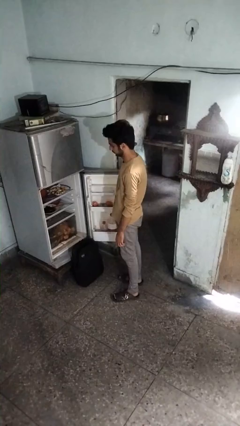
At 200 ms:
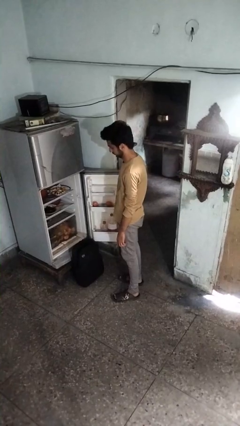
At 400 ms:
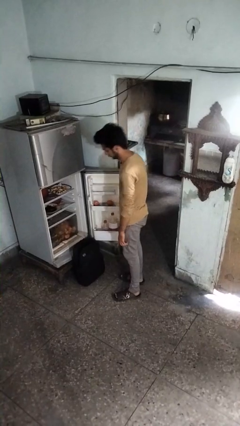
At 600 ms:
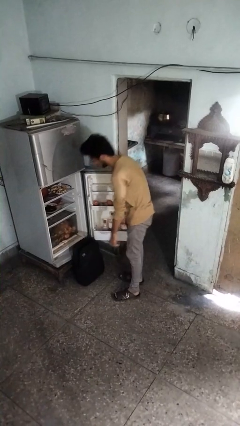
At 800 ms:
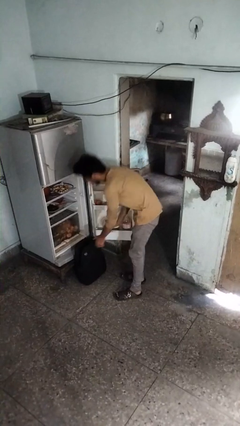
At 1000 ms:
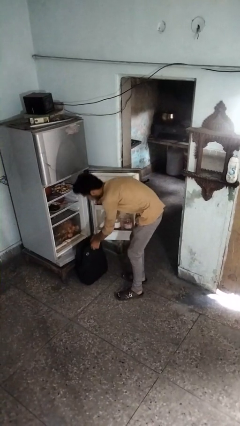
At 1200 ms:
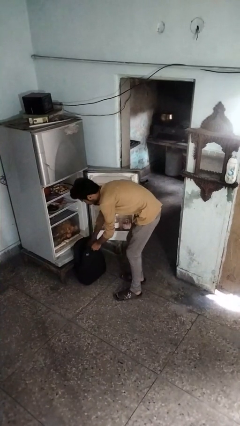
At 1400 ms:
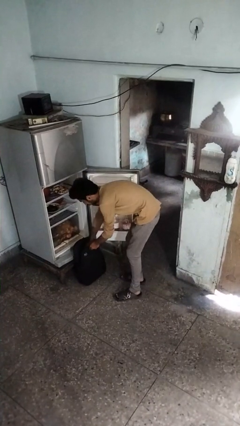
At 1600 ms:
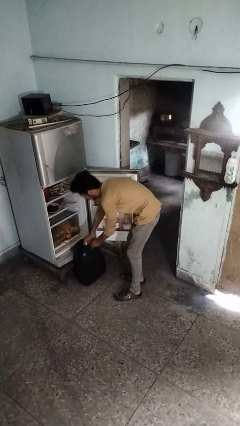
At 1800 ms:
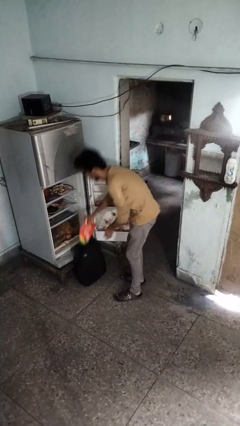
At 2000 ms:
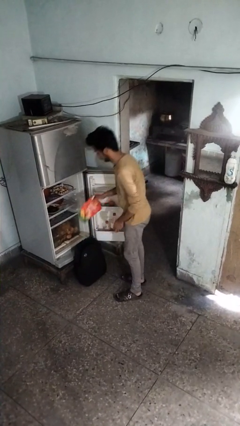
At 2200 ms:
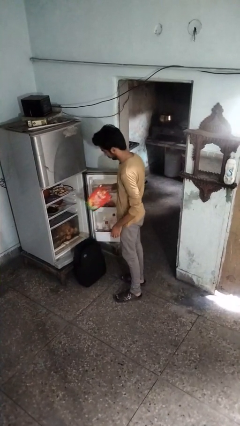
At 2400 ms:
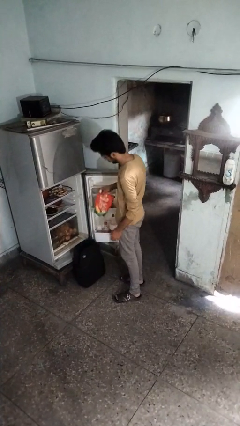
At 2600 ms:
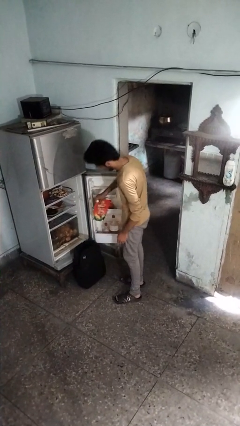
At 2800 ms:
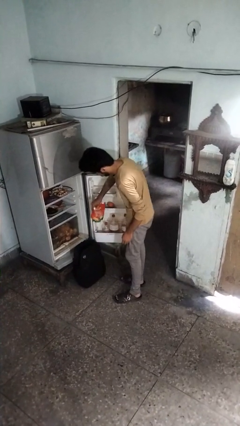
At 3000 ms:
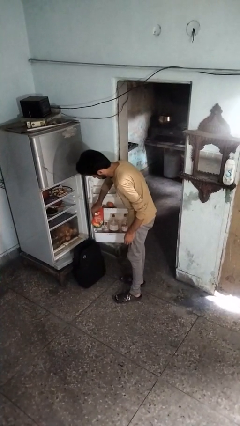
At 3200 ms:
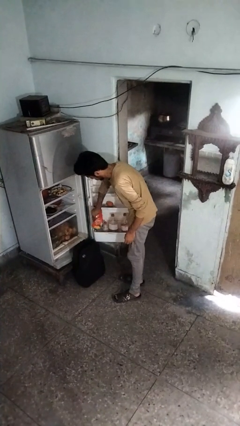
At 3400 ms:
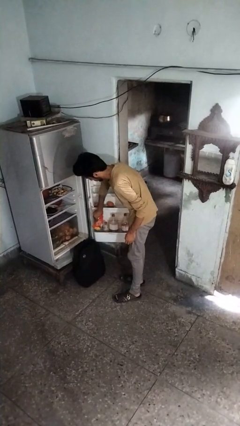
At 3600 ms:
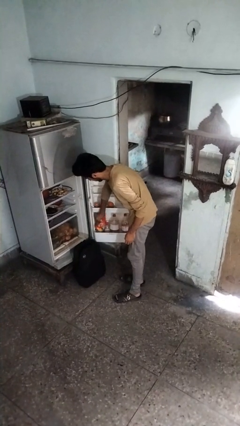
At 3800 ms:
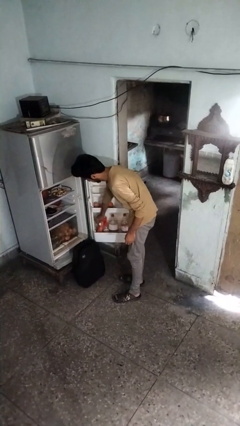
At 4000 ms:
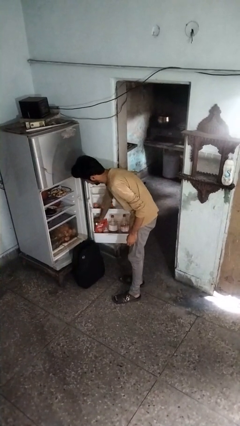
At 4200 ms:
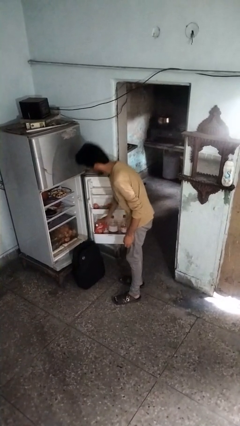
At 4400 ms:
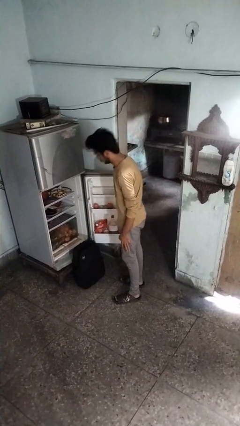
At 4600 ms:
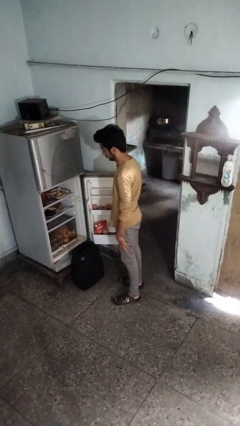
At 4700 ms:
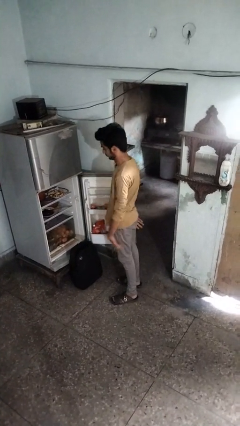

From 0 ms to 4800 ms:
person loads groceries into refrigerator

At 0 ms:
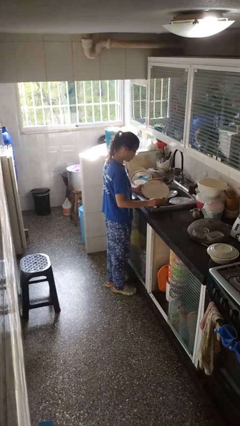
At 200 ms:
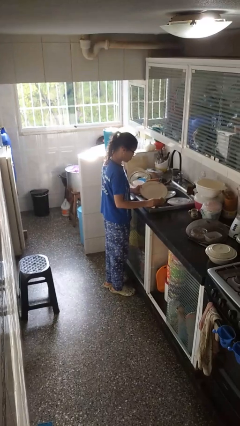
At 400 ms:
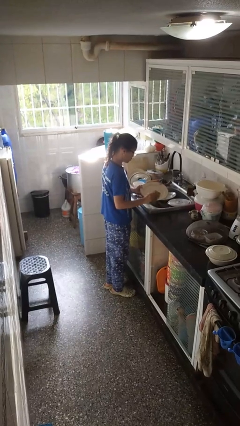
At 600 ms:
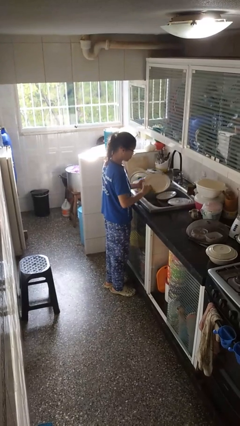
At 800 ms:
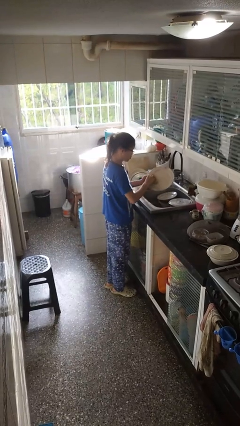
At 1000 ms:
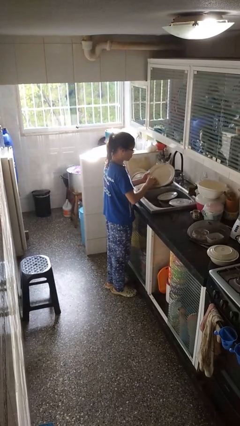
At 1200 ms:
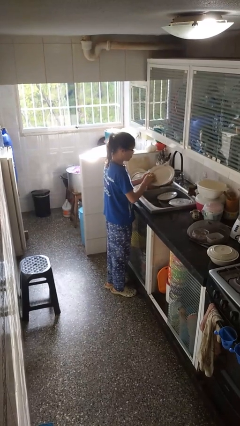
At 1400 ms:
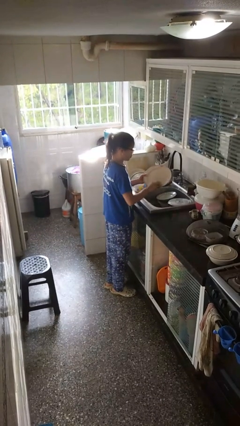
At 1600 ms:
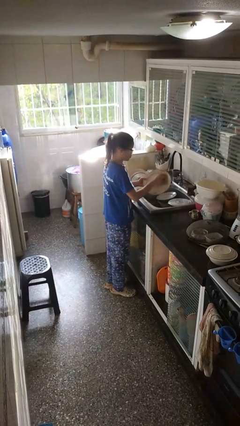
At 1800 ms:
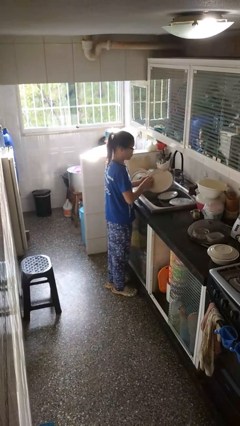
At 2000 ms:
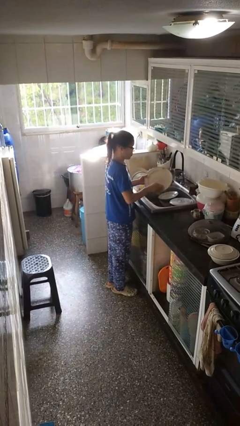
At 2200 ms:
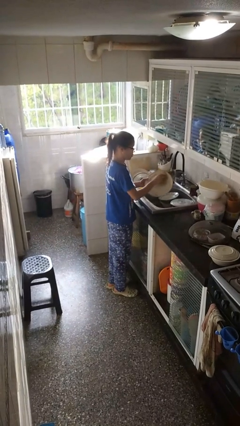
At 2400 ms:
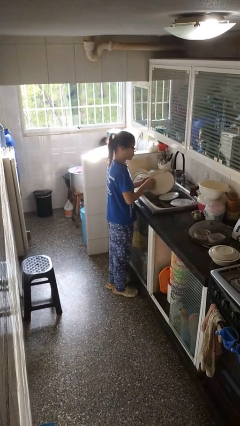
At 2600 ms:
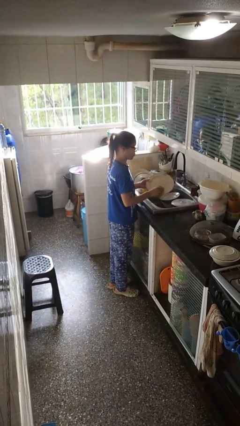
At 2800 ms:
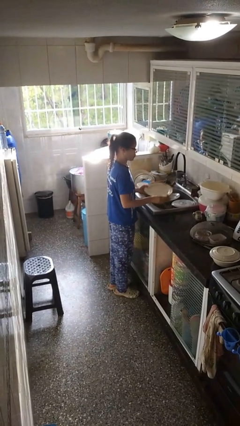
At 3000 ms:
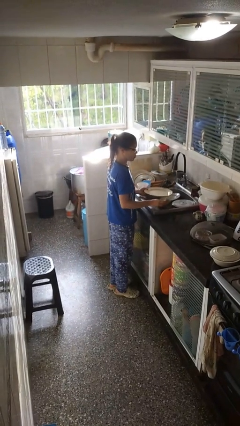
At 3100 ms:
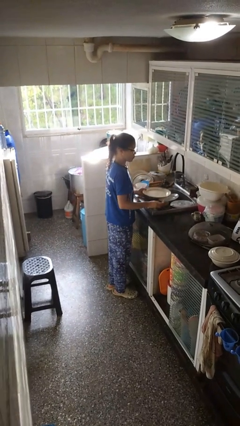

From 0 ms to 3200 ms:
person washes dish

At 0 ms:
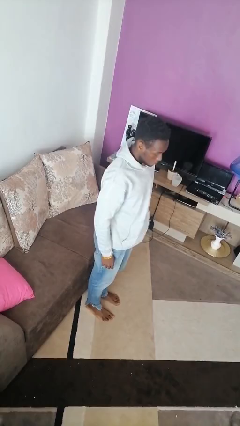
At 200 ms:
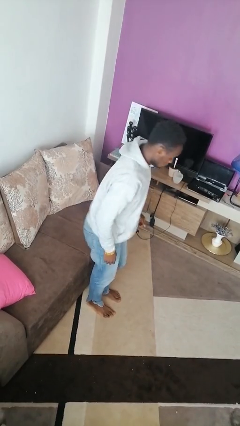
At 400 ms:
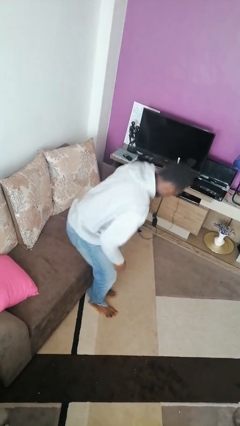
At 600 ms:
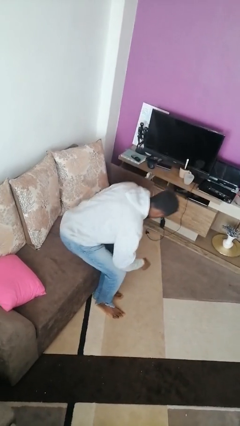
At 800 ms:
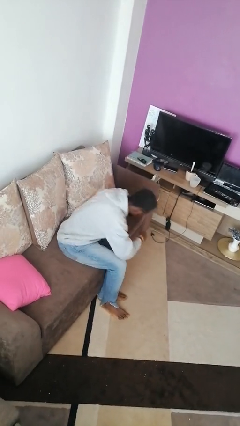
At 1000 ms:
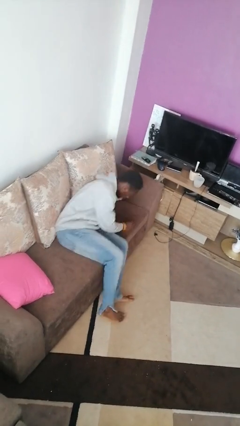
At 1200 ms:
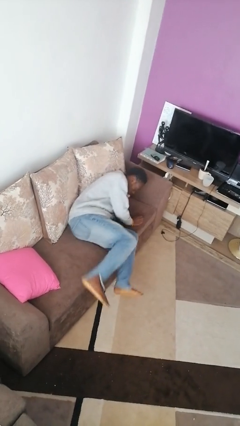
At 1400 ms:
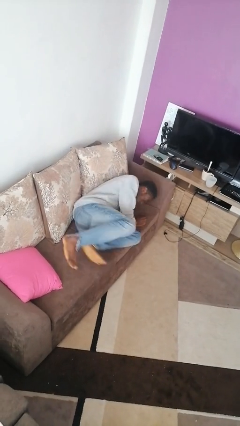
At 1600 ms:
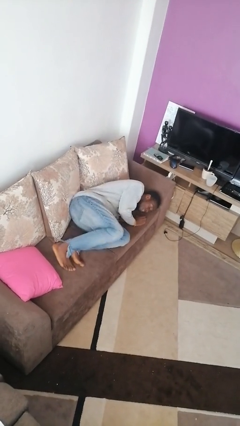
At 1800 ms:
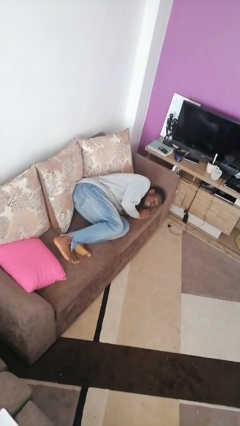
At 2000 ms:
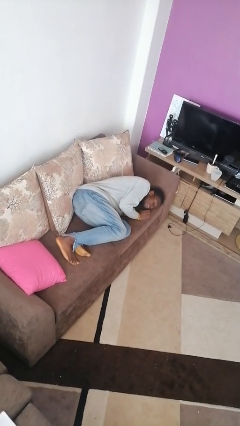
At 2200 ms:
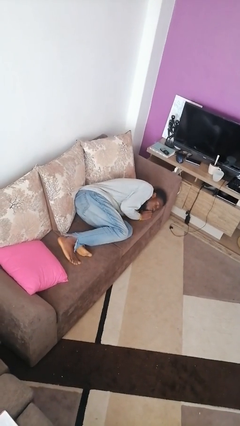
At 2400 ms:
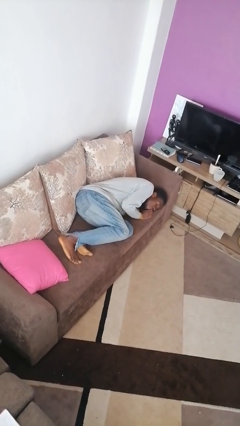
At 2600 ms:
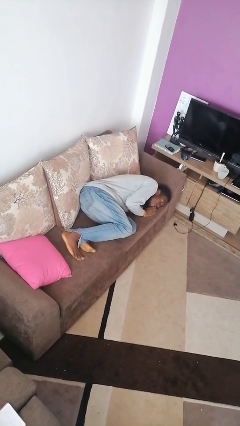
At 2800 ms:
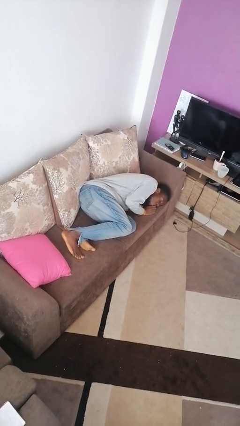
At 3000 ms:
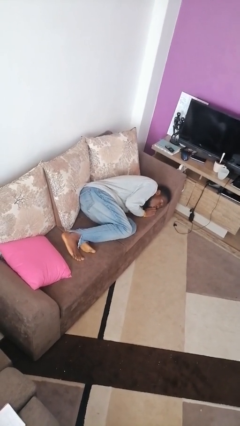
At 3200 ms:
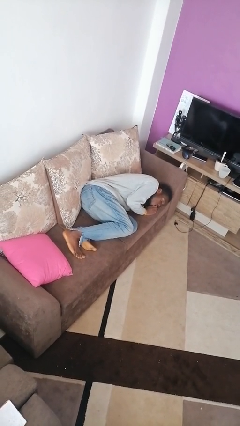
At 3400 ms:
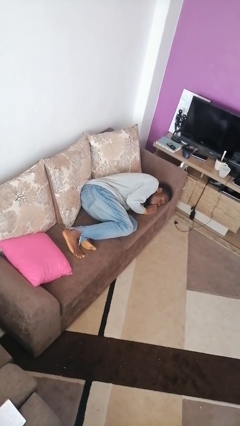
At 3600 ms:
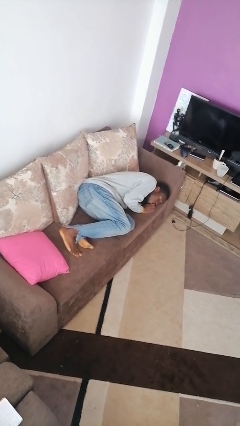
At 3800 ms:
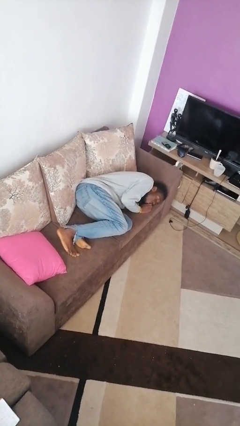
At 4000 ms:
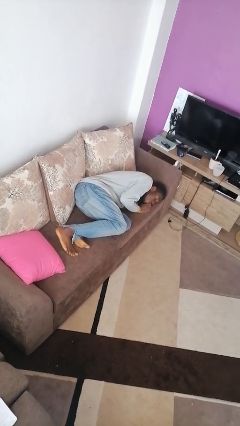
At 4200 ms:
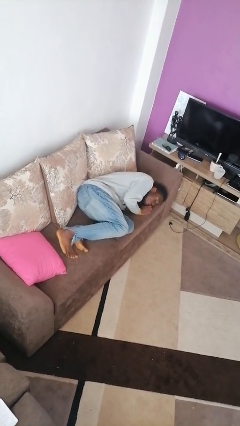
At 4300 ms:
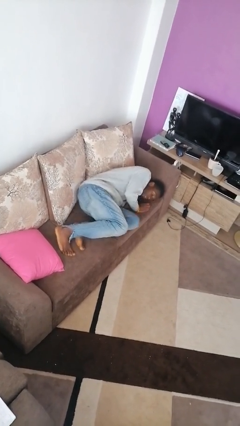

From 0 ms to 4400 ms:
person lies down on couch

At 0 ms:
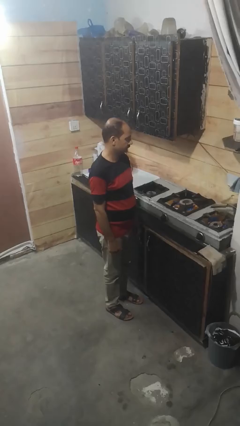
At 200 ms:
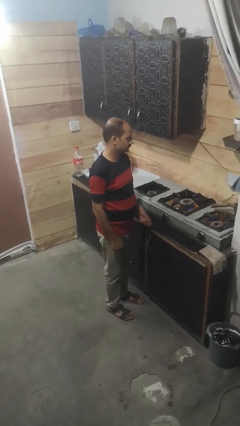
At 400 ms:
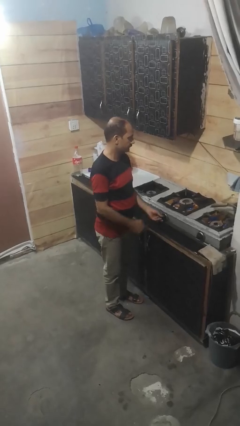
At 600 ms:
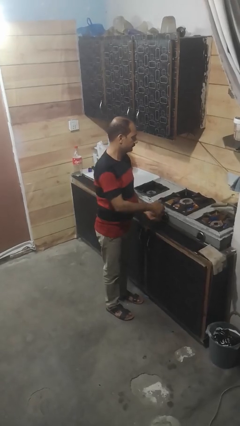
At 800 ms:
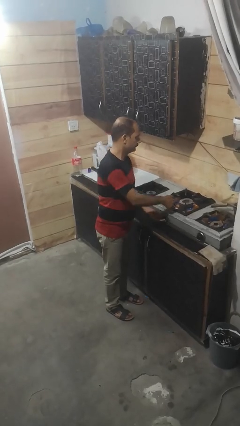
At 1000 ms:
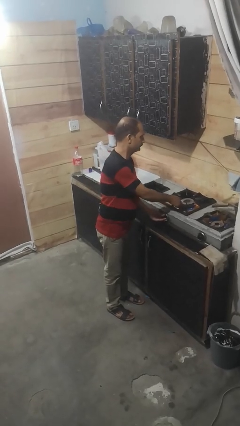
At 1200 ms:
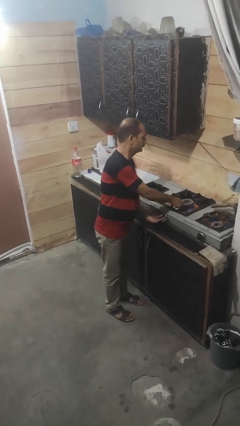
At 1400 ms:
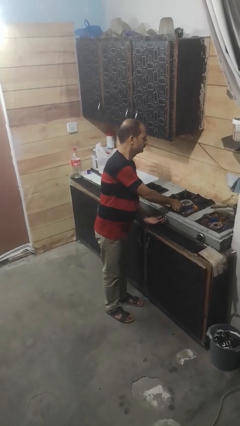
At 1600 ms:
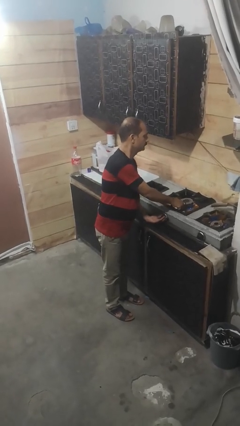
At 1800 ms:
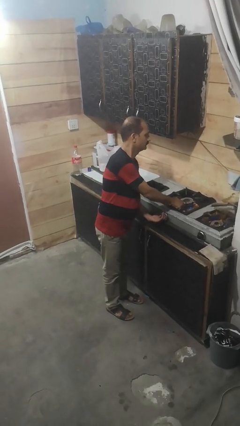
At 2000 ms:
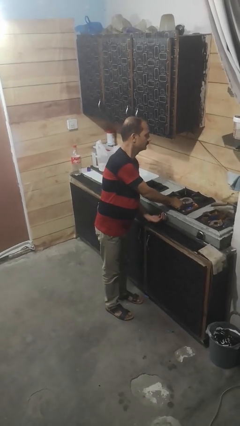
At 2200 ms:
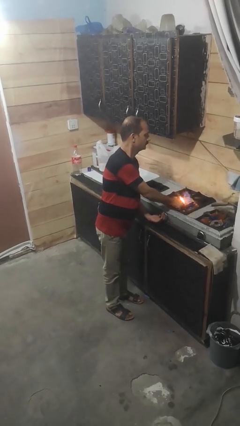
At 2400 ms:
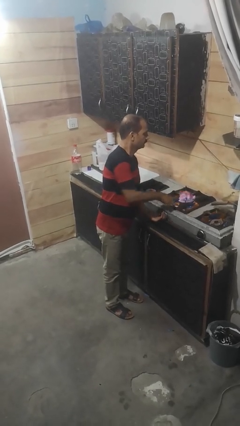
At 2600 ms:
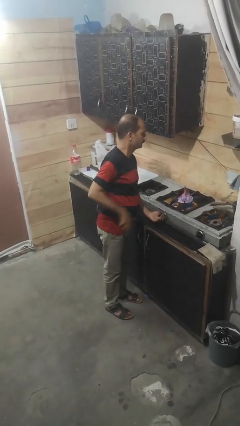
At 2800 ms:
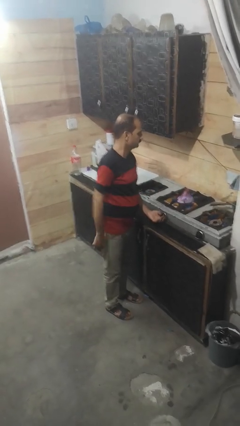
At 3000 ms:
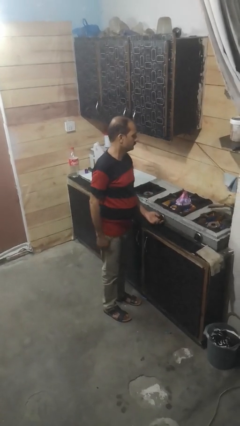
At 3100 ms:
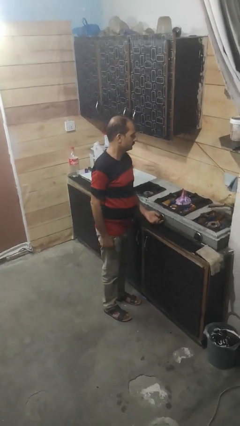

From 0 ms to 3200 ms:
person turns on stovetop

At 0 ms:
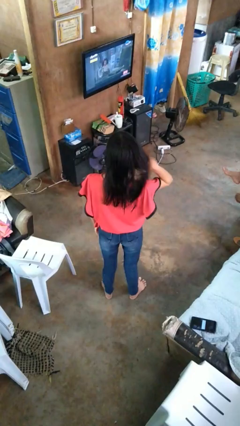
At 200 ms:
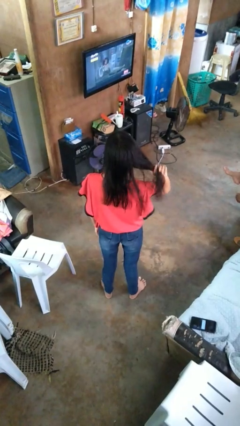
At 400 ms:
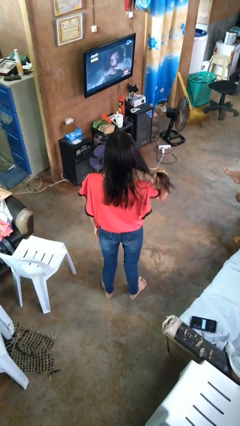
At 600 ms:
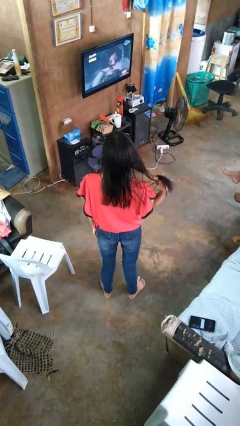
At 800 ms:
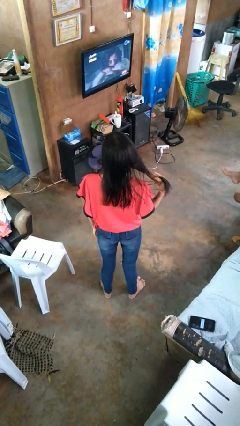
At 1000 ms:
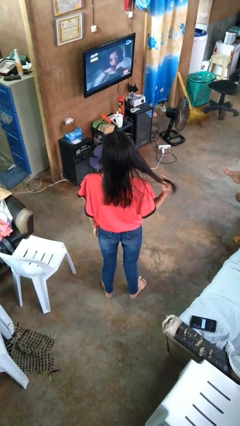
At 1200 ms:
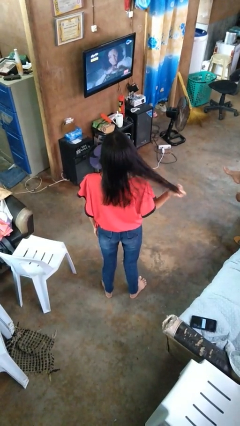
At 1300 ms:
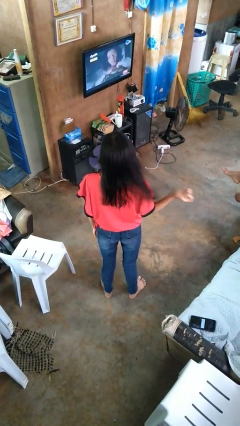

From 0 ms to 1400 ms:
person strokes hair

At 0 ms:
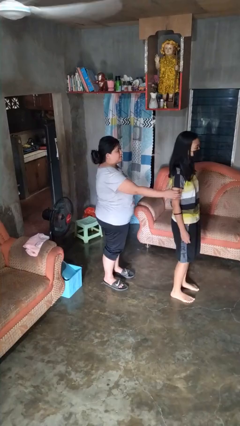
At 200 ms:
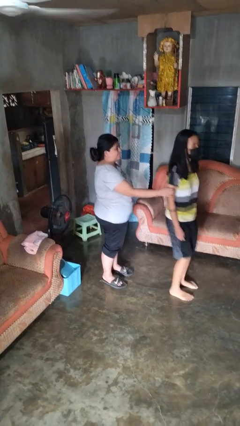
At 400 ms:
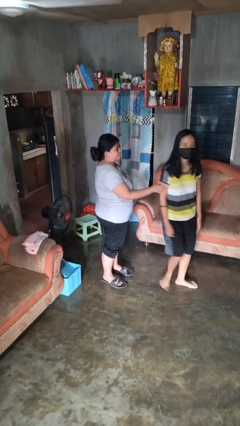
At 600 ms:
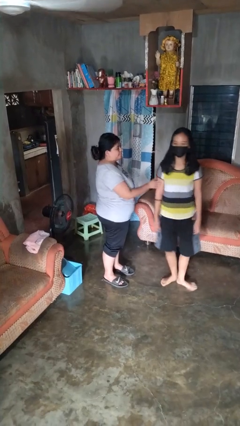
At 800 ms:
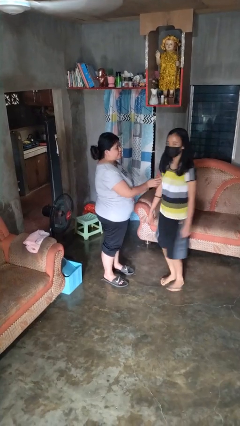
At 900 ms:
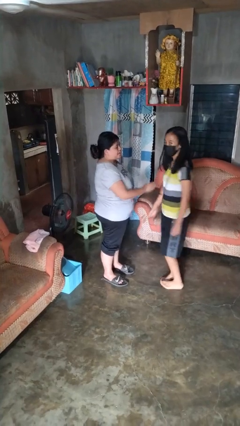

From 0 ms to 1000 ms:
person spins person around
